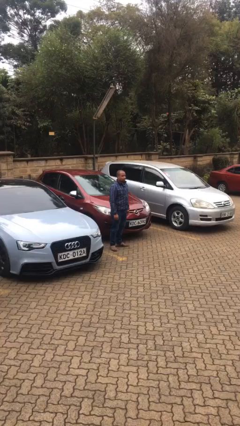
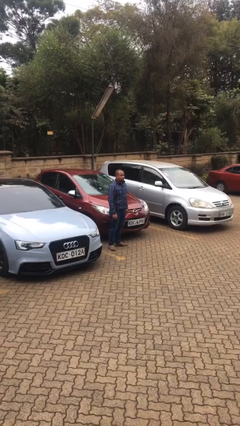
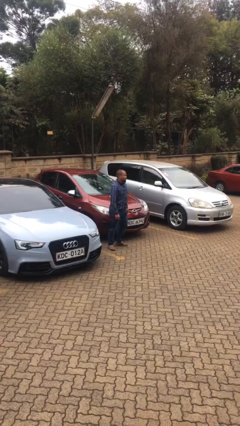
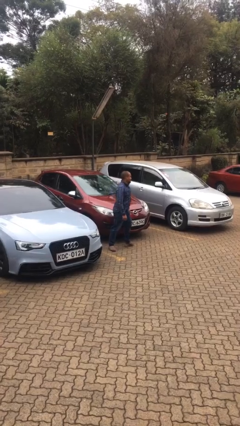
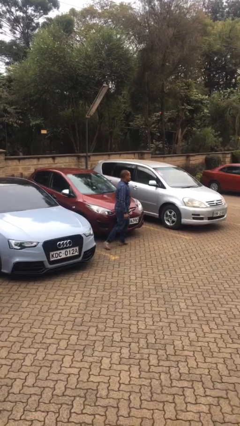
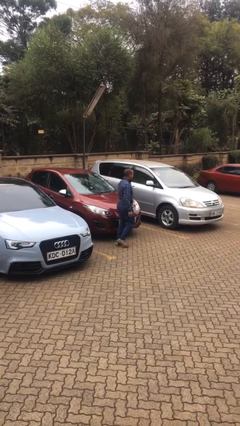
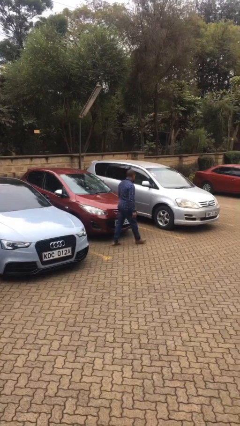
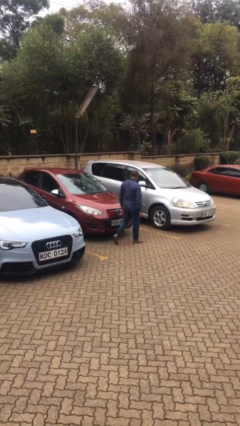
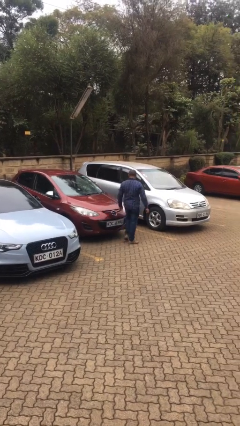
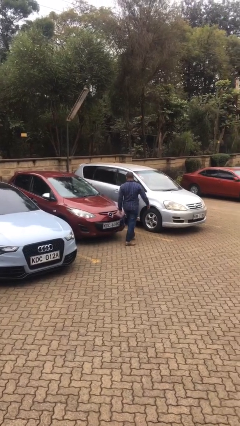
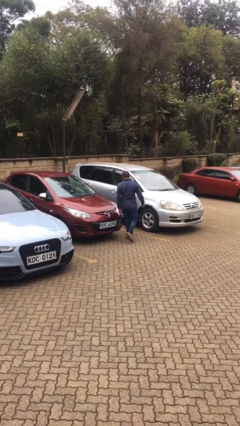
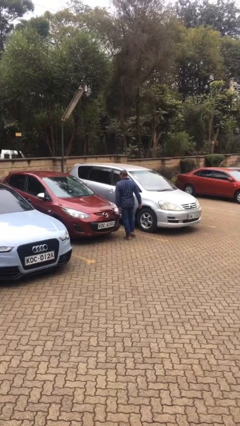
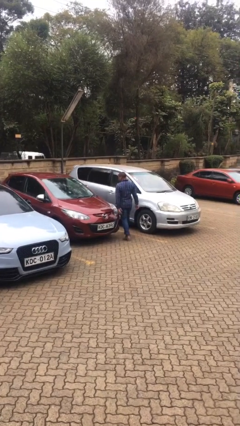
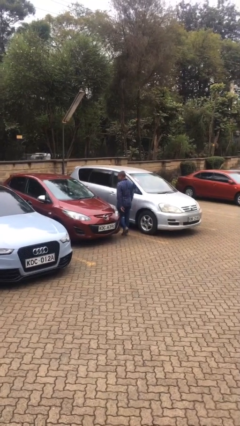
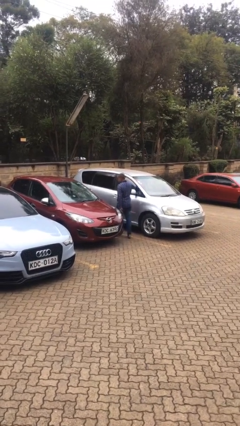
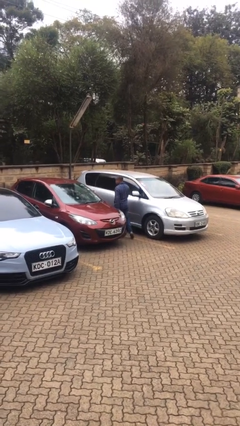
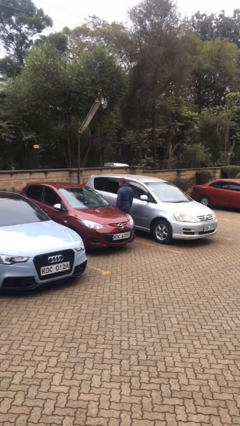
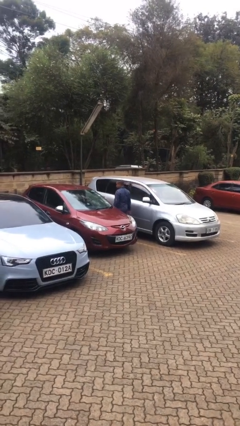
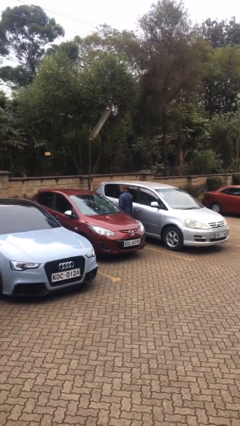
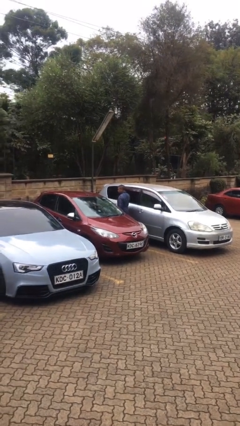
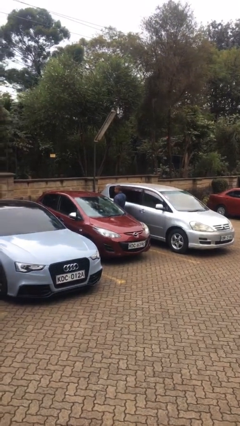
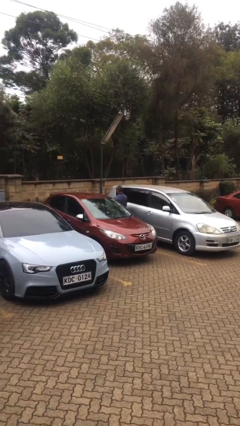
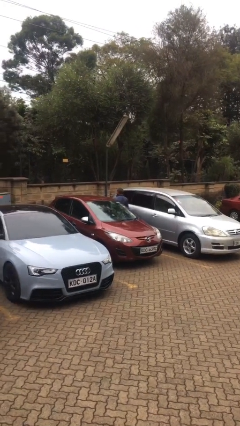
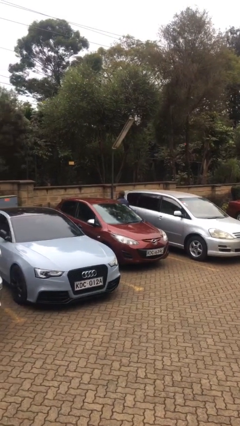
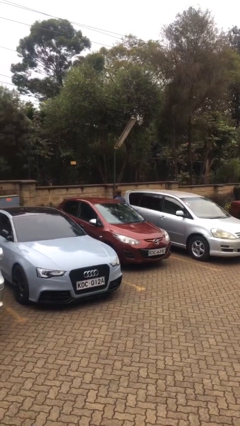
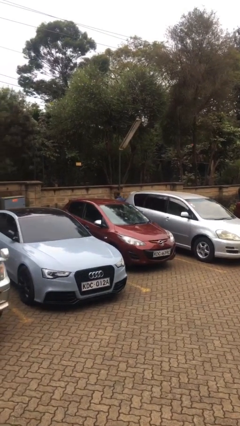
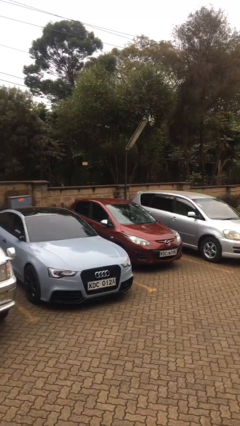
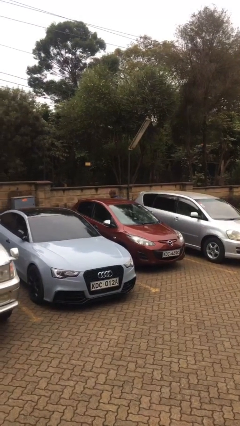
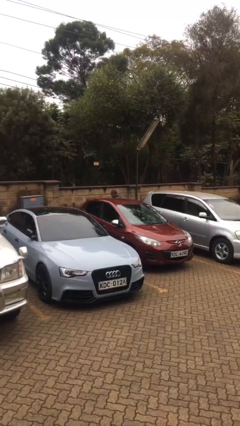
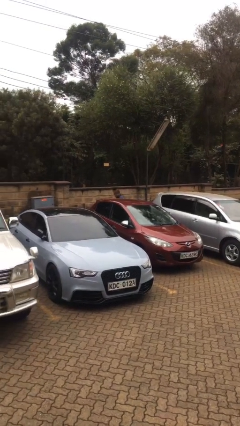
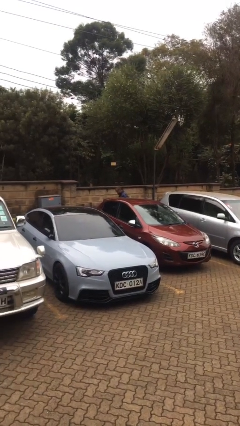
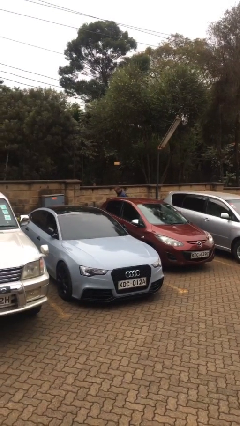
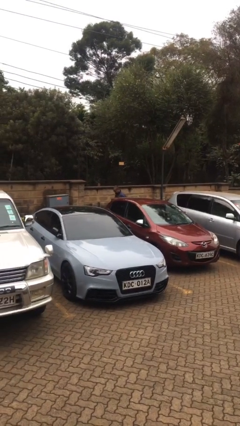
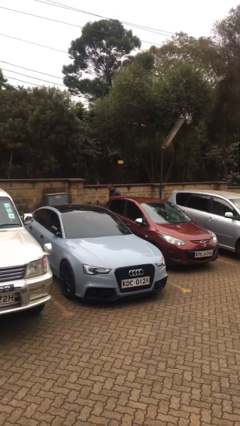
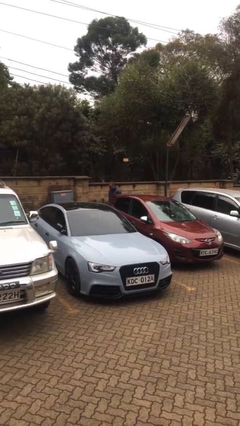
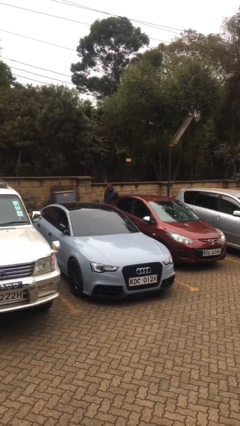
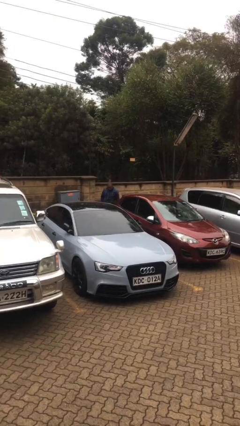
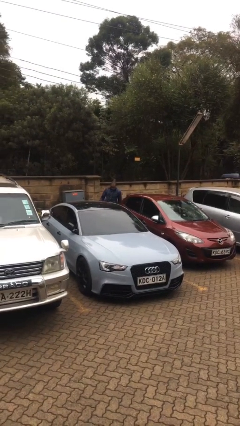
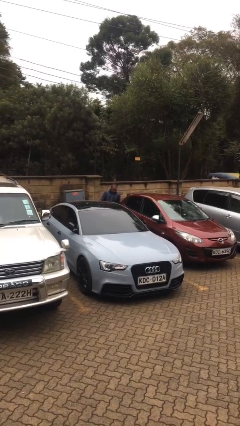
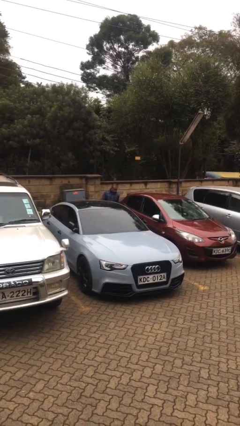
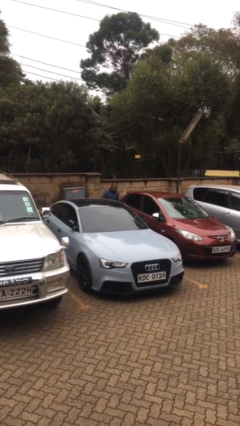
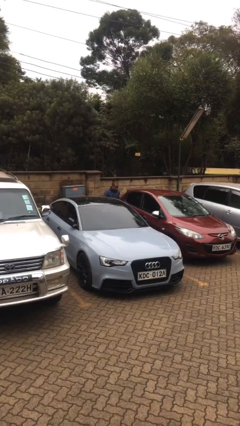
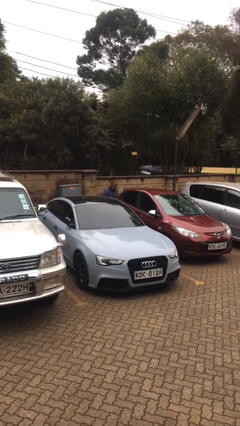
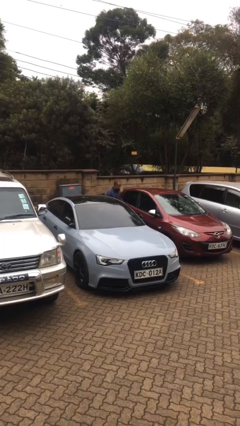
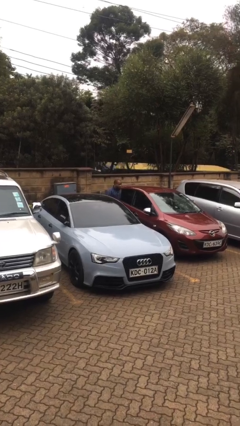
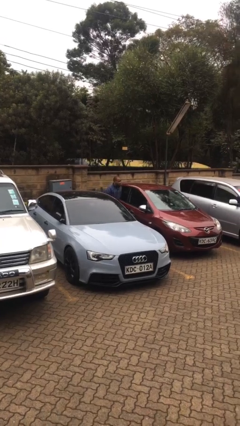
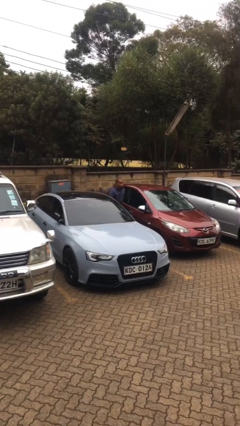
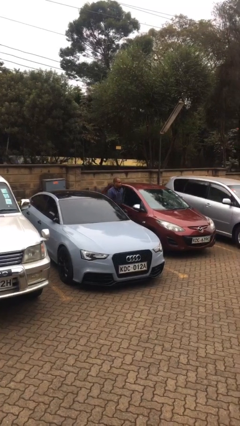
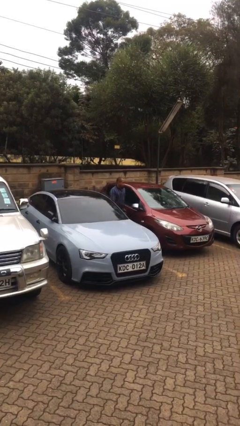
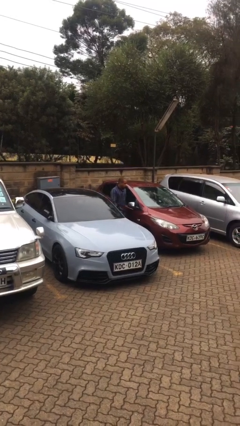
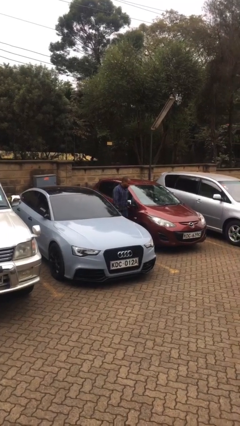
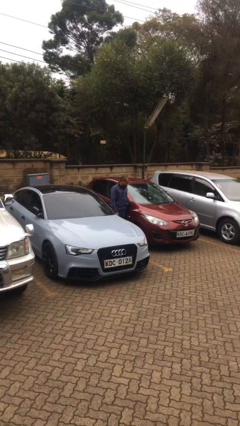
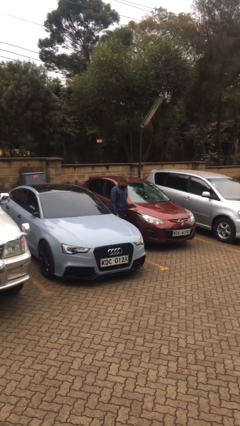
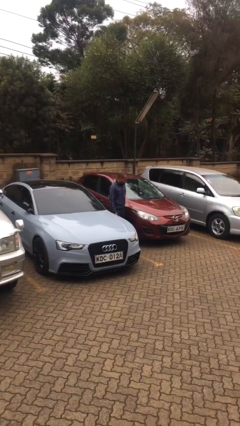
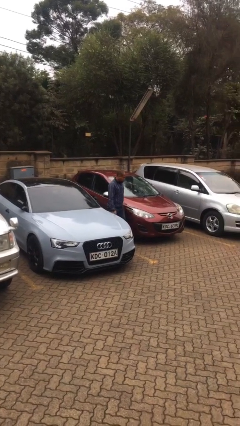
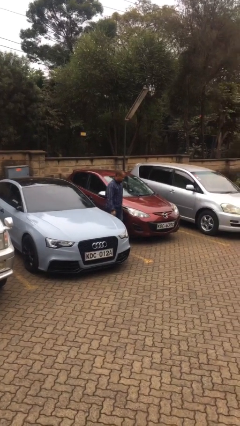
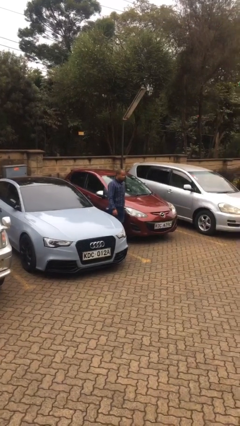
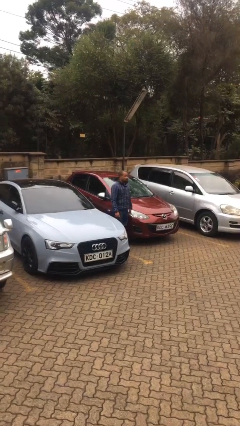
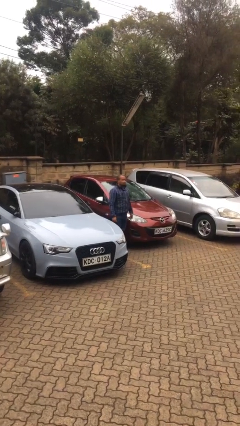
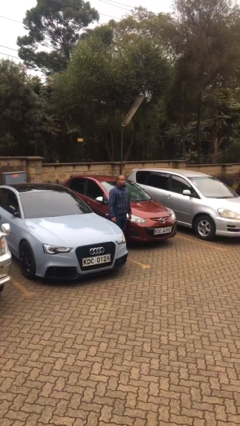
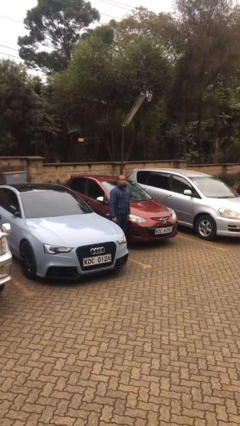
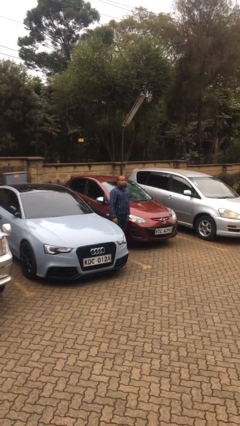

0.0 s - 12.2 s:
person walks around car

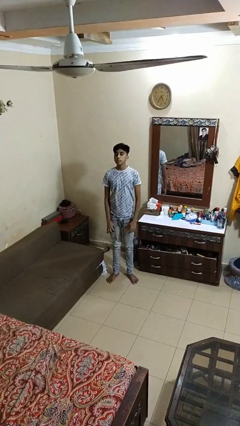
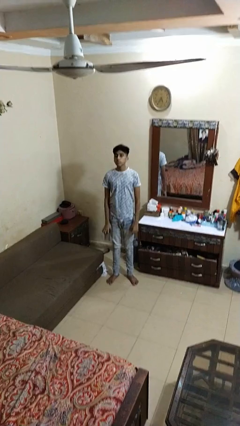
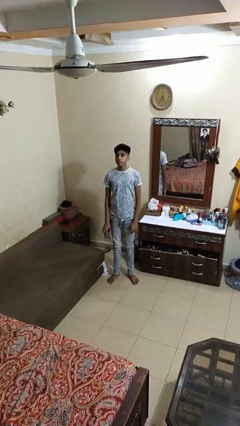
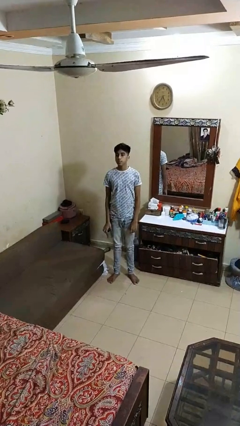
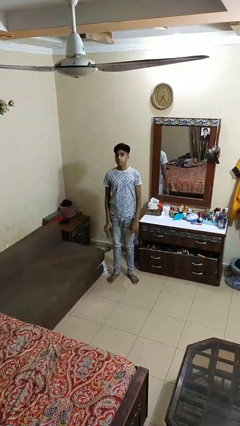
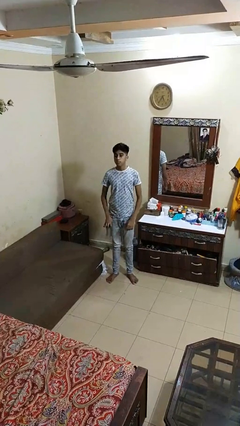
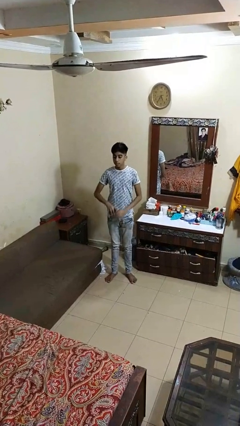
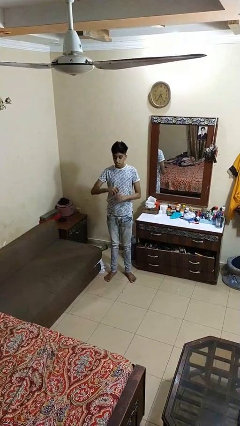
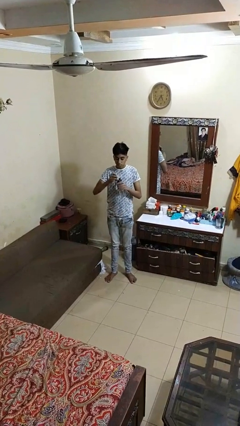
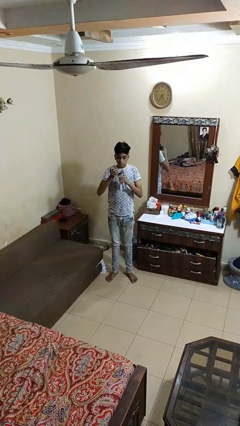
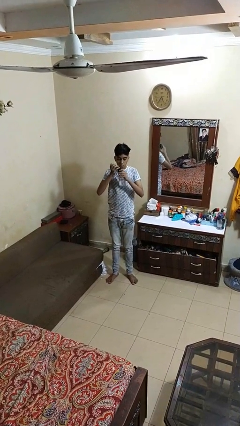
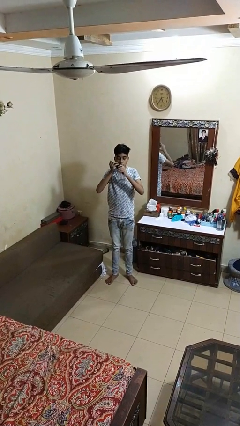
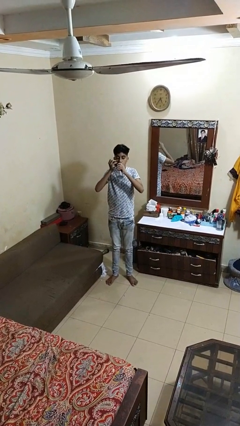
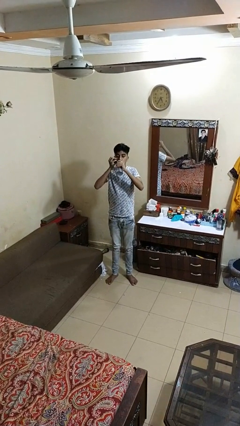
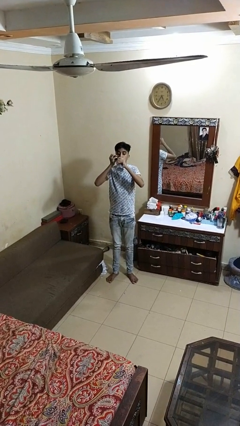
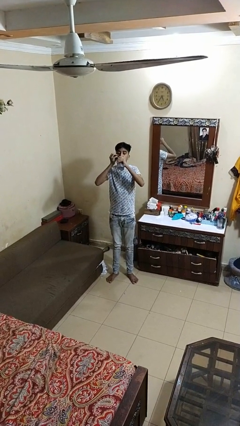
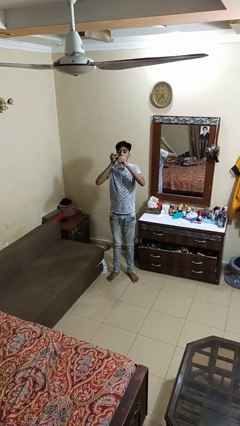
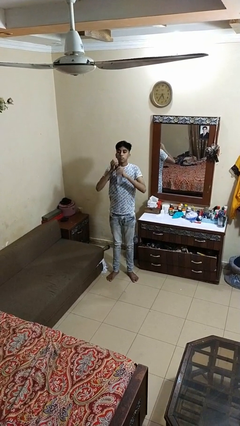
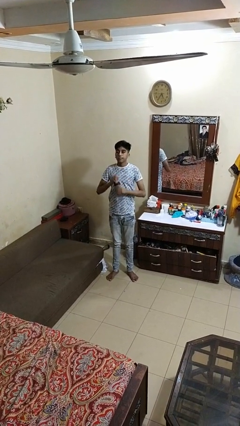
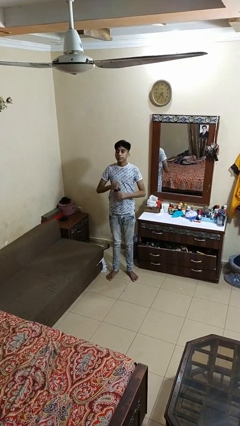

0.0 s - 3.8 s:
person drinks from bottle

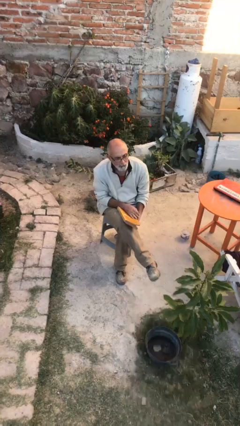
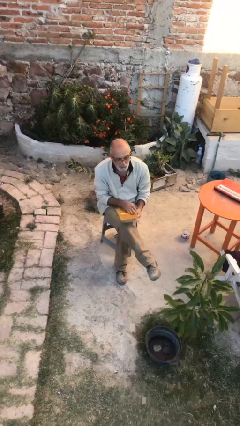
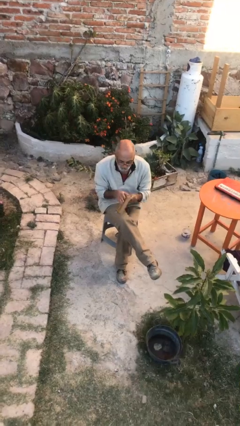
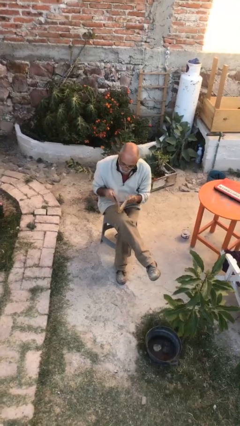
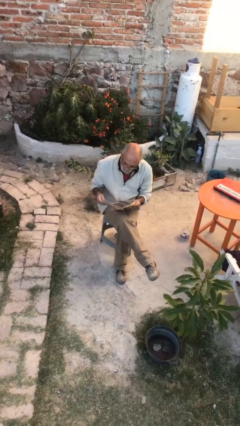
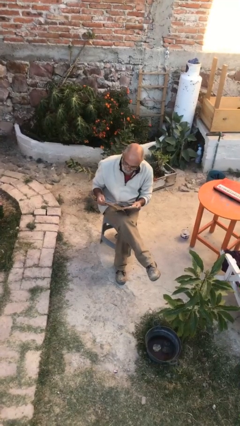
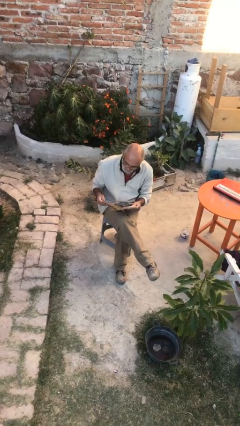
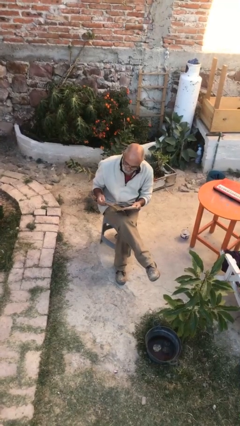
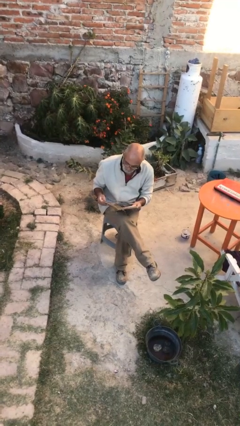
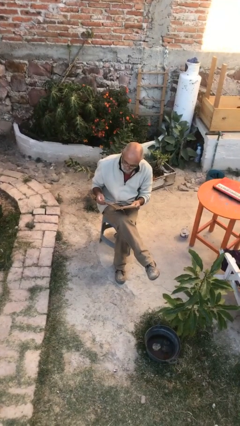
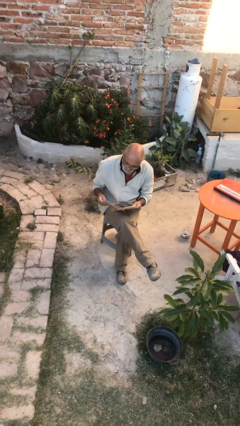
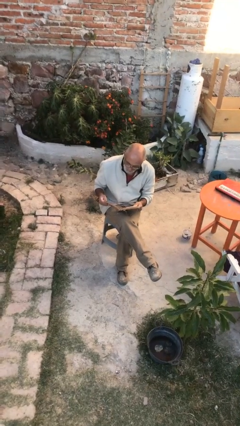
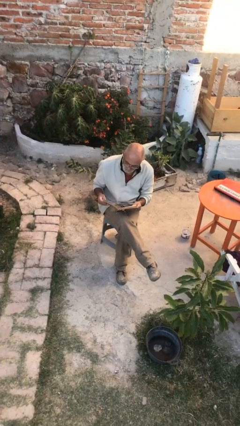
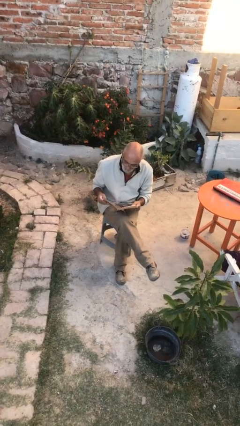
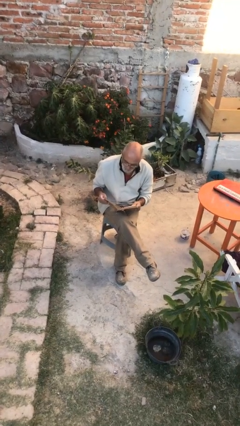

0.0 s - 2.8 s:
person reads document
